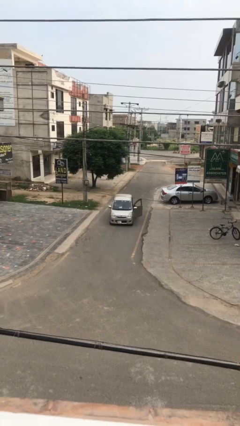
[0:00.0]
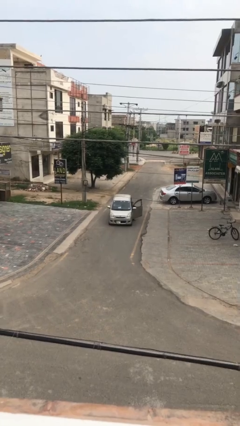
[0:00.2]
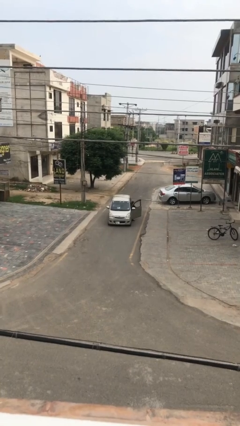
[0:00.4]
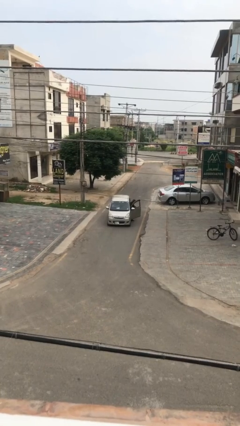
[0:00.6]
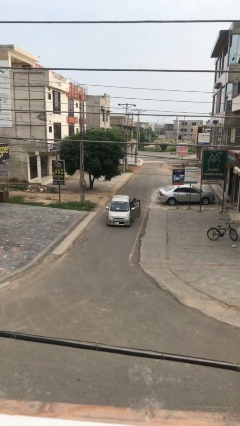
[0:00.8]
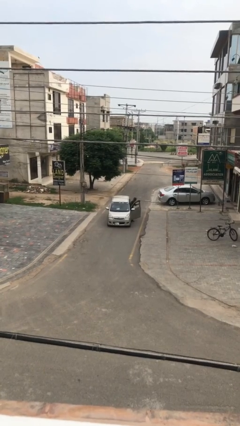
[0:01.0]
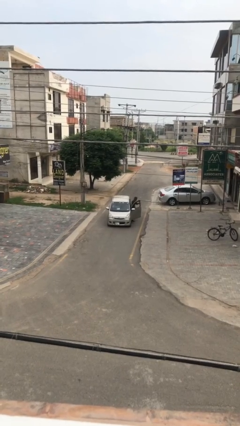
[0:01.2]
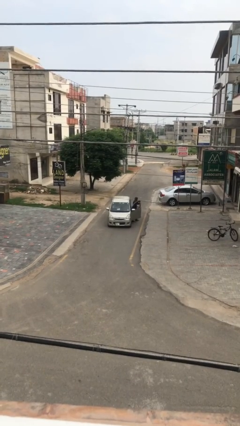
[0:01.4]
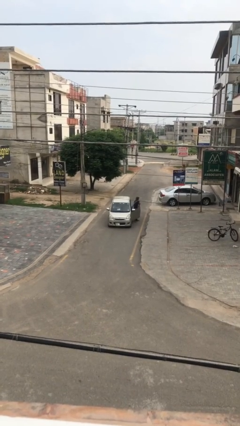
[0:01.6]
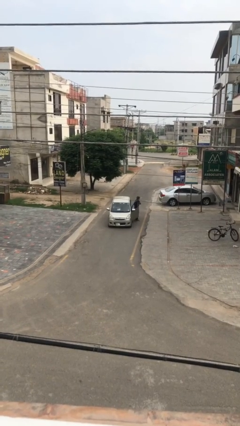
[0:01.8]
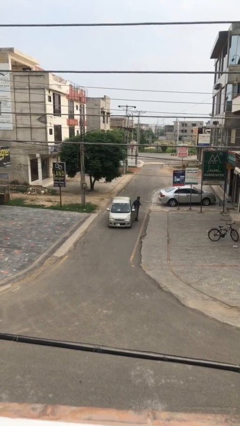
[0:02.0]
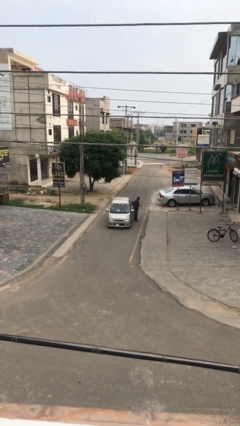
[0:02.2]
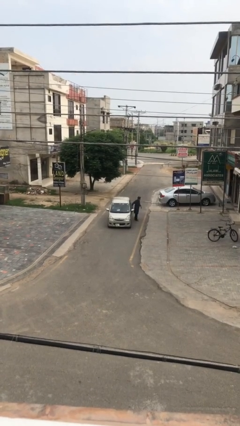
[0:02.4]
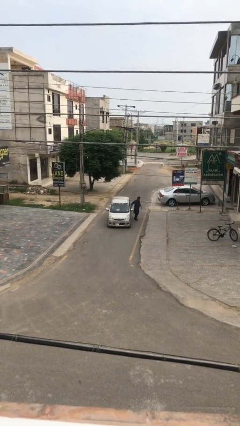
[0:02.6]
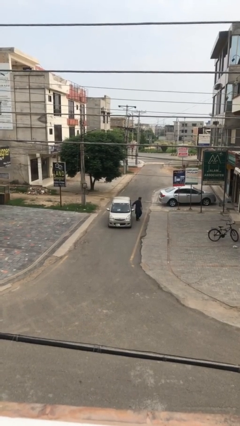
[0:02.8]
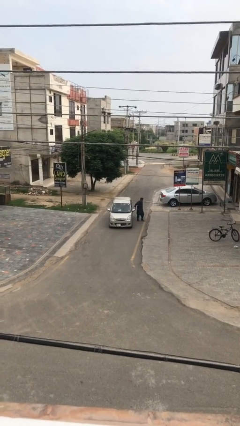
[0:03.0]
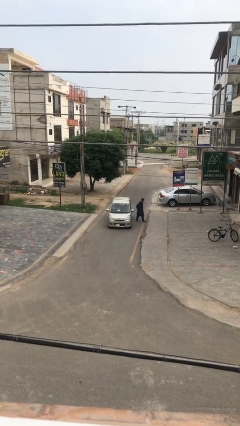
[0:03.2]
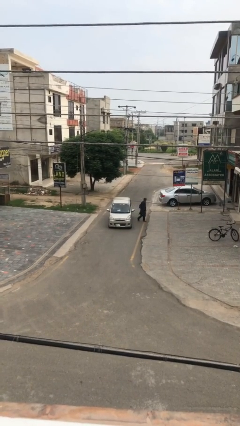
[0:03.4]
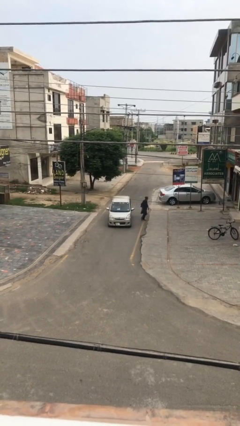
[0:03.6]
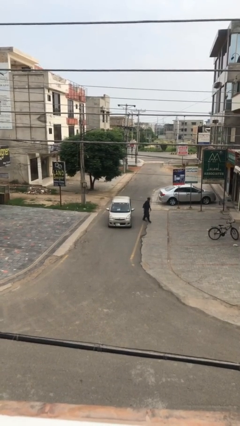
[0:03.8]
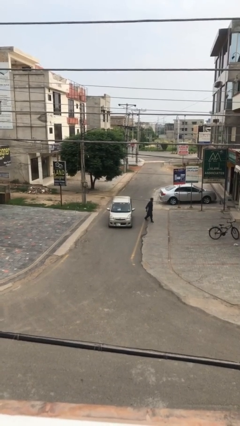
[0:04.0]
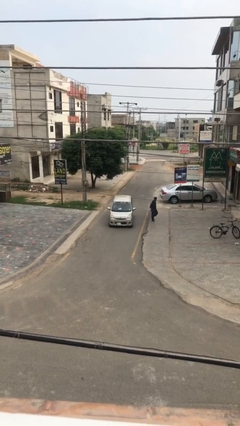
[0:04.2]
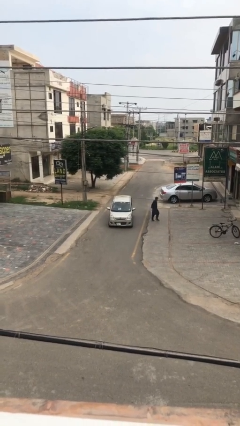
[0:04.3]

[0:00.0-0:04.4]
car drops off person

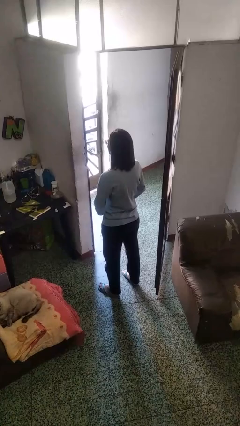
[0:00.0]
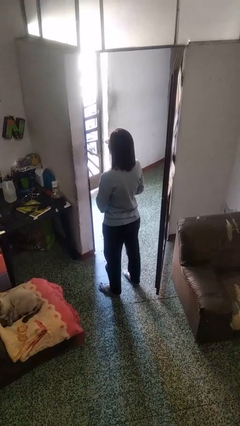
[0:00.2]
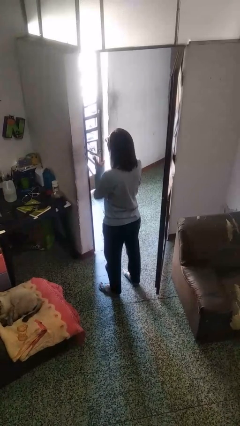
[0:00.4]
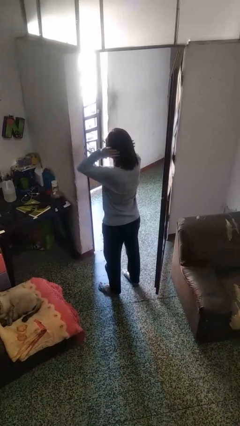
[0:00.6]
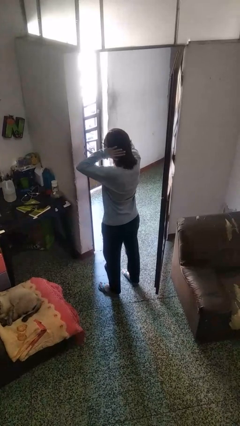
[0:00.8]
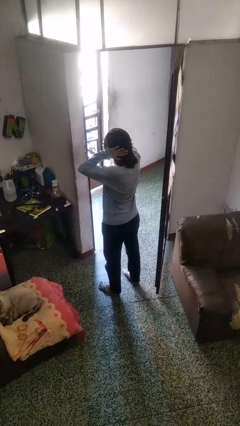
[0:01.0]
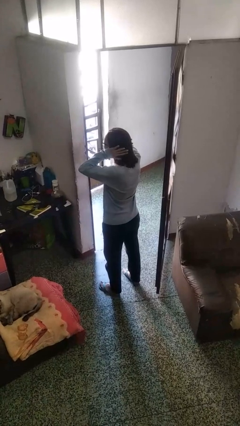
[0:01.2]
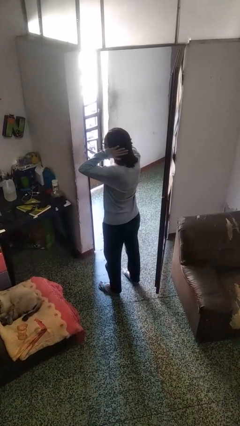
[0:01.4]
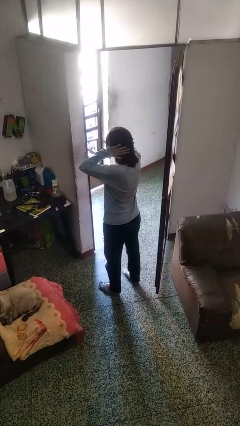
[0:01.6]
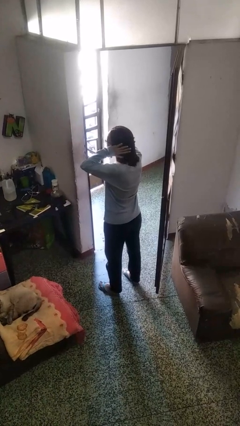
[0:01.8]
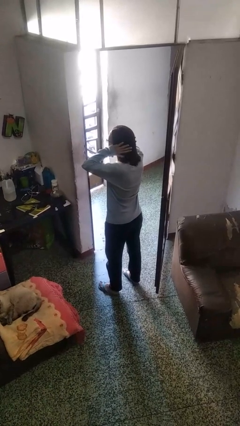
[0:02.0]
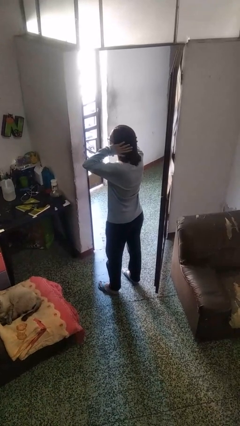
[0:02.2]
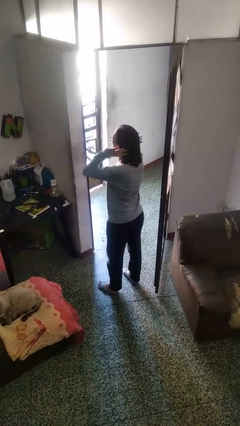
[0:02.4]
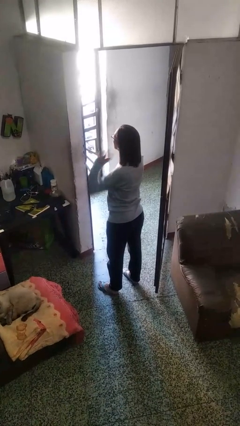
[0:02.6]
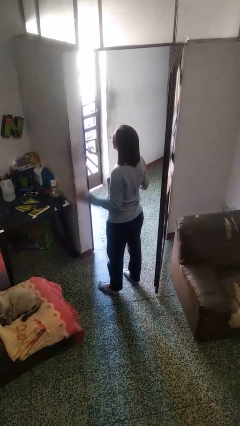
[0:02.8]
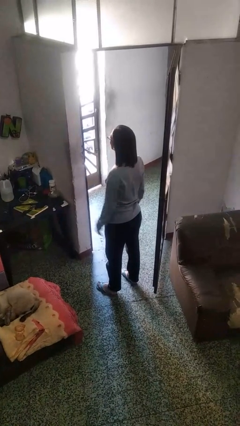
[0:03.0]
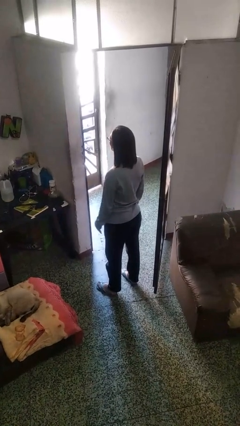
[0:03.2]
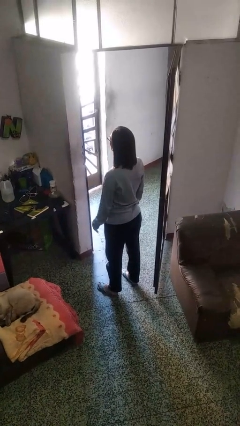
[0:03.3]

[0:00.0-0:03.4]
person puts fingers in ear

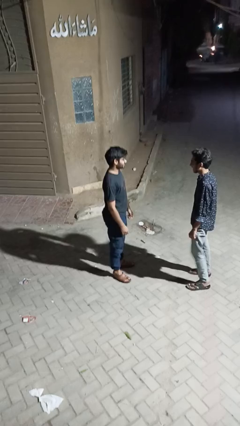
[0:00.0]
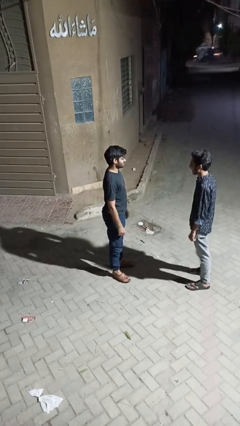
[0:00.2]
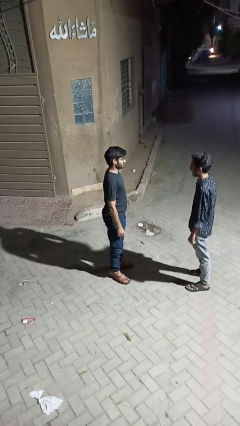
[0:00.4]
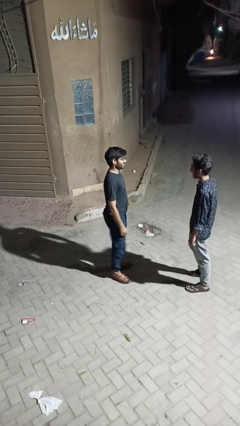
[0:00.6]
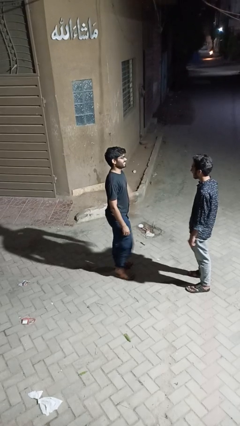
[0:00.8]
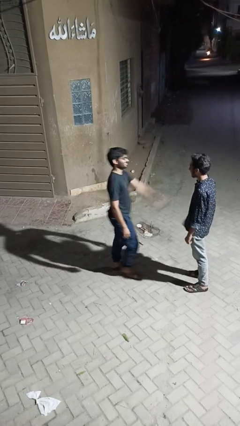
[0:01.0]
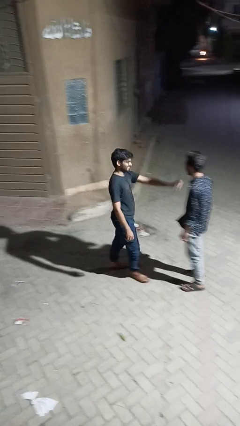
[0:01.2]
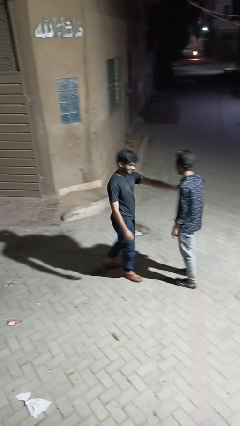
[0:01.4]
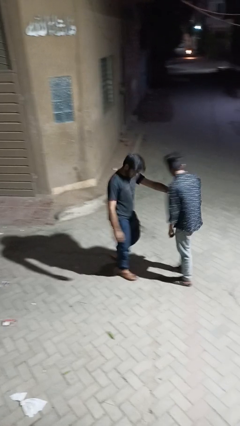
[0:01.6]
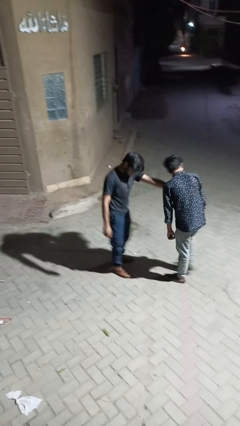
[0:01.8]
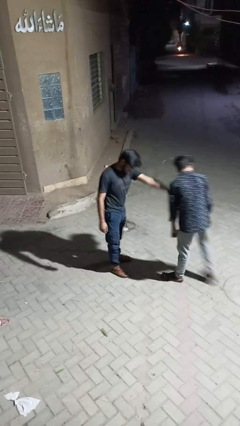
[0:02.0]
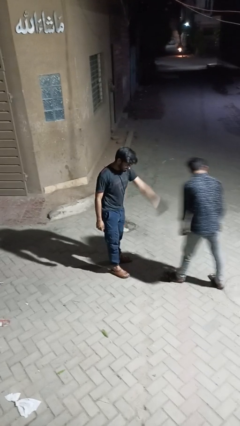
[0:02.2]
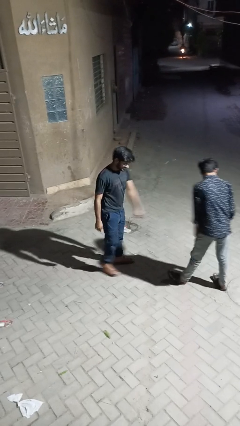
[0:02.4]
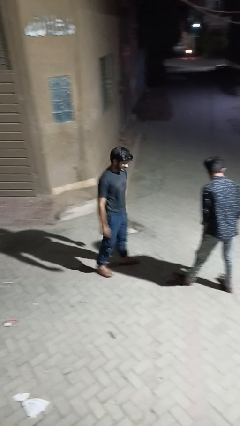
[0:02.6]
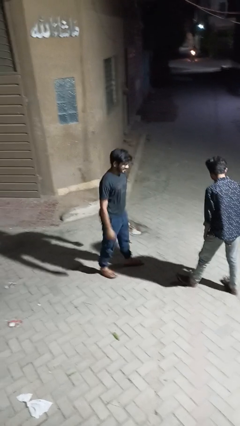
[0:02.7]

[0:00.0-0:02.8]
person shoves person

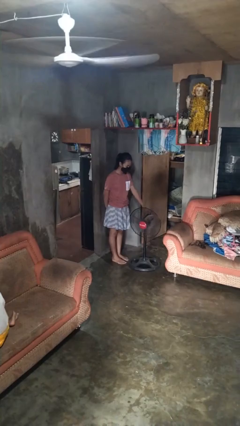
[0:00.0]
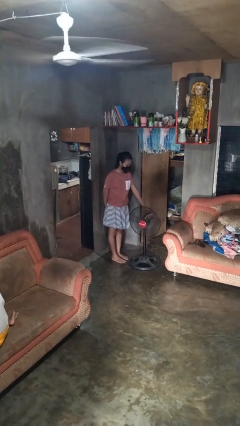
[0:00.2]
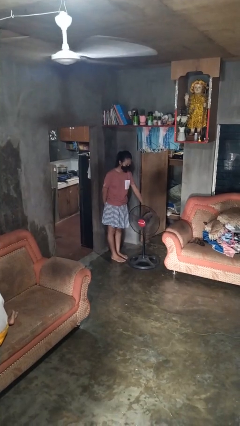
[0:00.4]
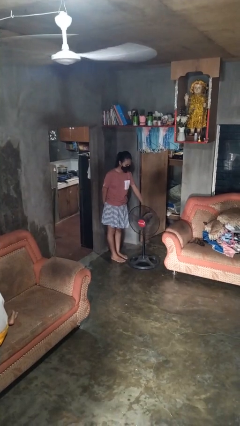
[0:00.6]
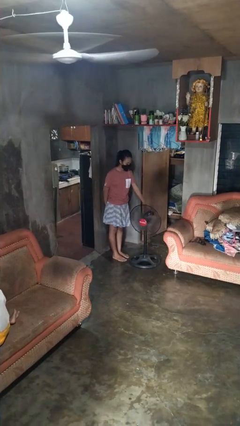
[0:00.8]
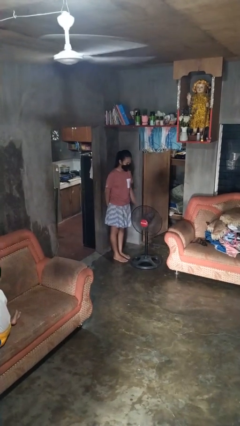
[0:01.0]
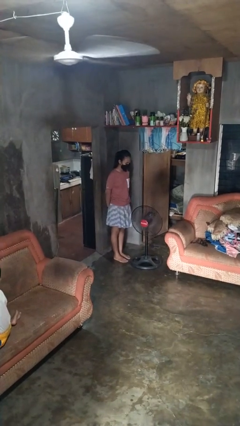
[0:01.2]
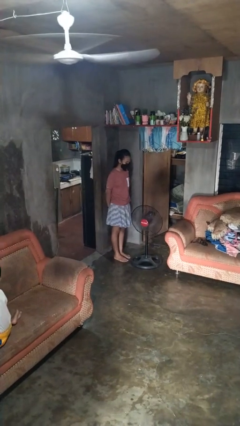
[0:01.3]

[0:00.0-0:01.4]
person turns on fan

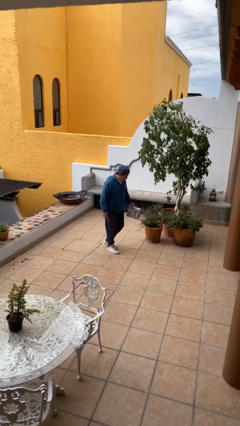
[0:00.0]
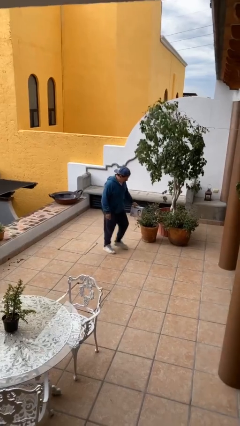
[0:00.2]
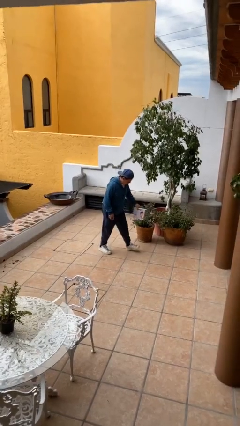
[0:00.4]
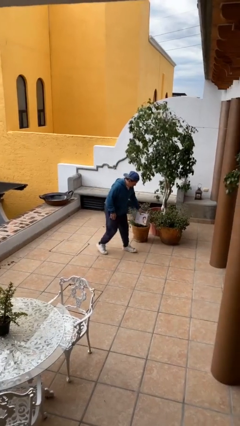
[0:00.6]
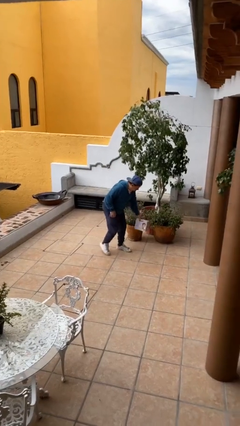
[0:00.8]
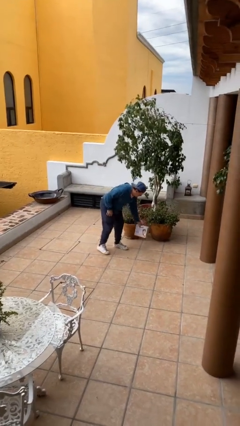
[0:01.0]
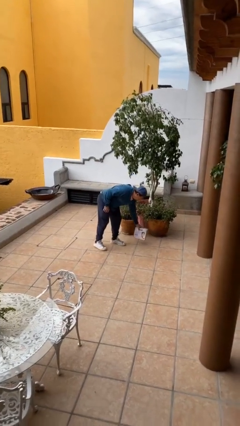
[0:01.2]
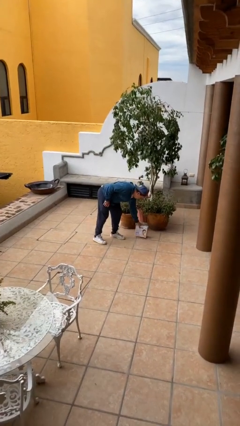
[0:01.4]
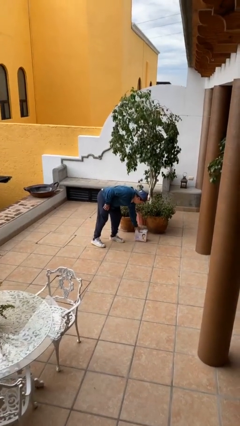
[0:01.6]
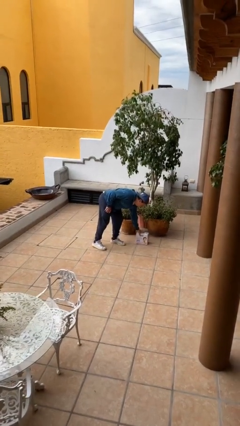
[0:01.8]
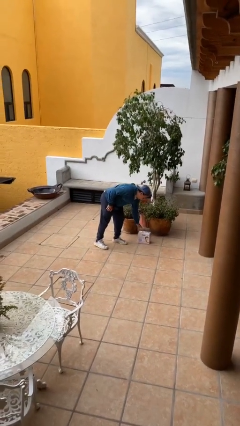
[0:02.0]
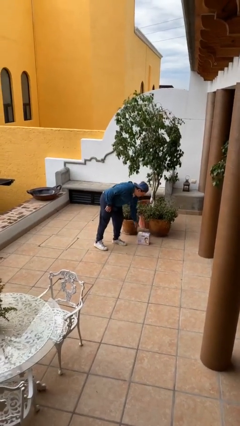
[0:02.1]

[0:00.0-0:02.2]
person puts down object on floor

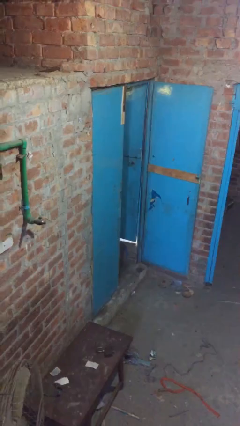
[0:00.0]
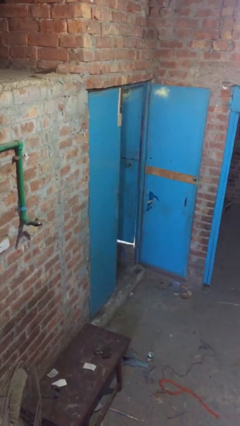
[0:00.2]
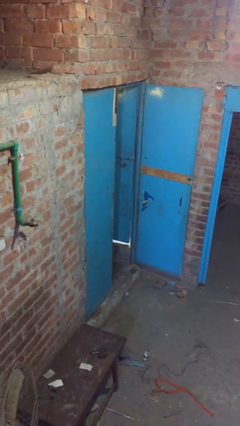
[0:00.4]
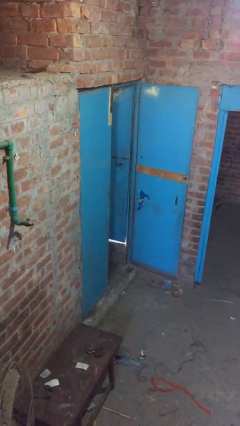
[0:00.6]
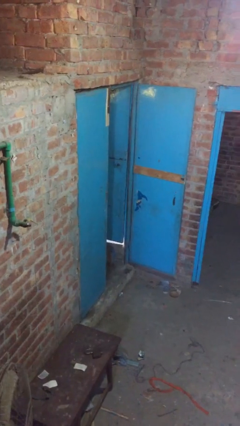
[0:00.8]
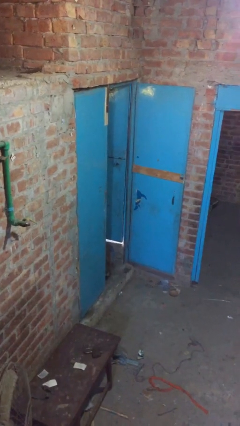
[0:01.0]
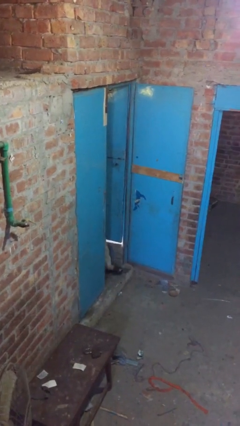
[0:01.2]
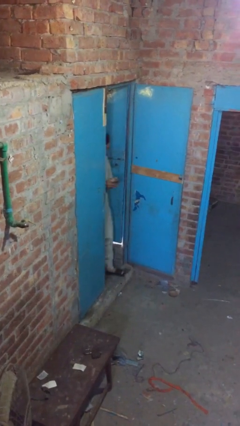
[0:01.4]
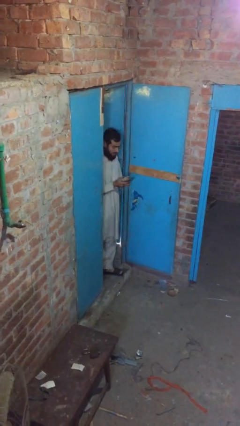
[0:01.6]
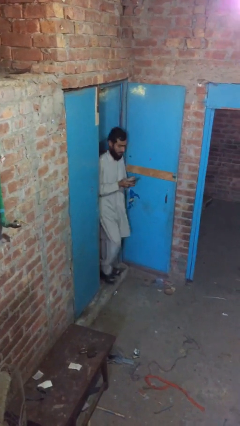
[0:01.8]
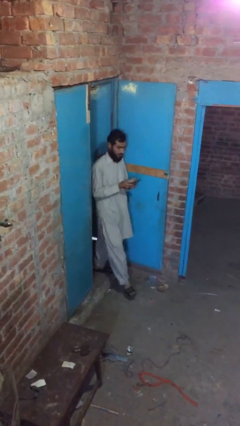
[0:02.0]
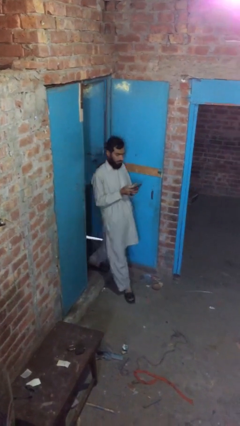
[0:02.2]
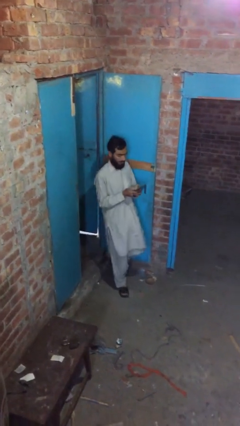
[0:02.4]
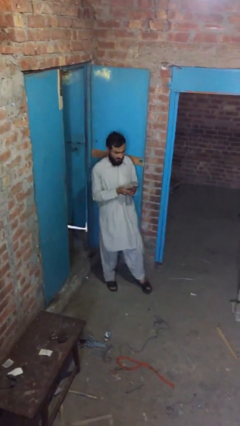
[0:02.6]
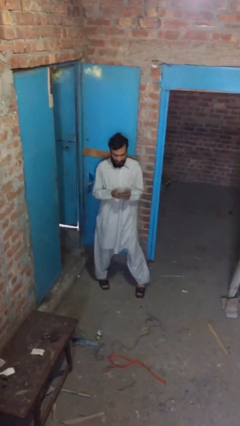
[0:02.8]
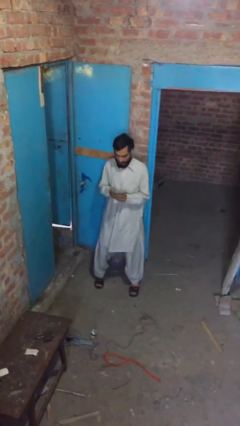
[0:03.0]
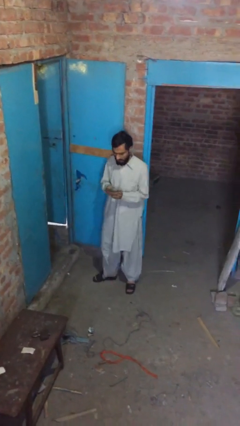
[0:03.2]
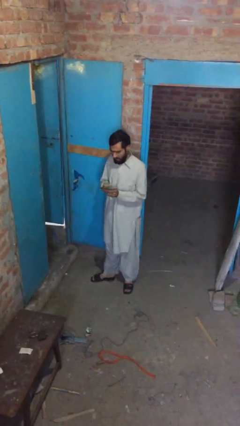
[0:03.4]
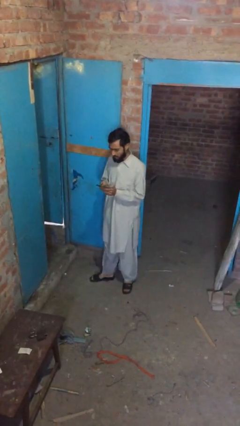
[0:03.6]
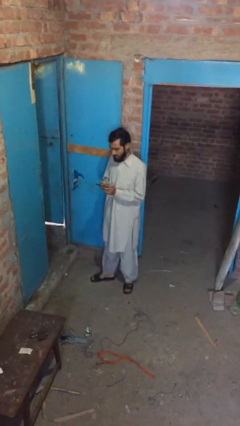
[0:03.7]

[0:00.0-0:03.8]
person enters scene through structure
